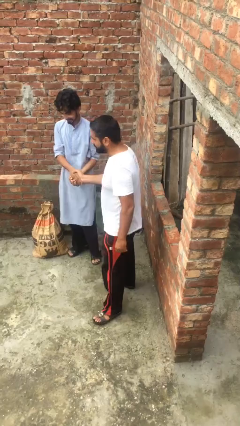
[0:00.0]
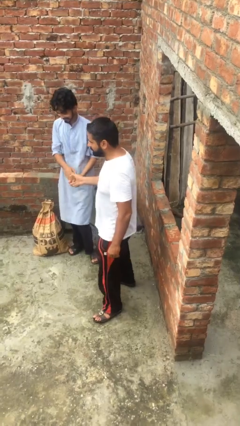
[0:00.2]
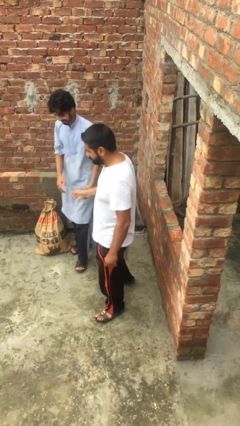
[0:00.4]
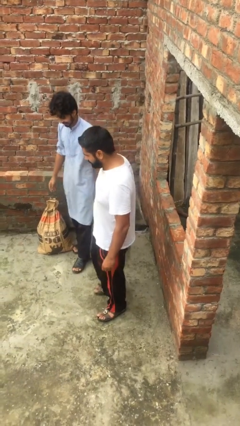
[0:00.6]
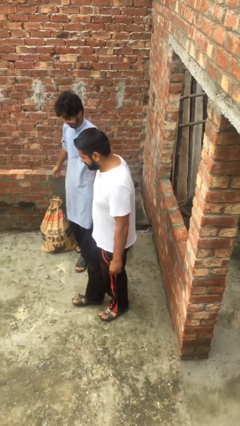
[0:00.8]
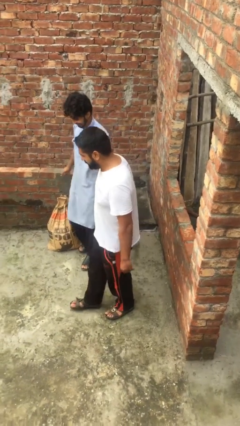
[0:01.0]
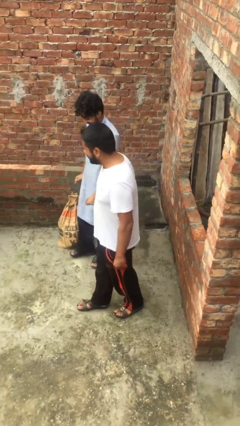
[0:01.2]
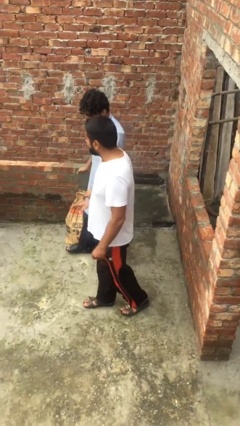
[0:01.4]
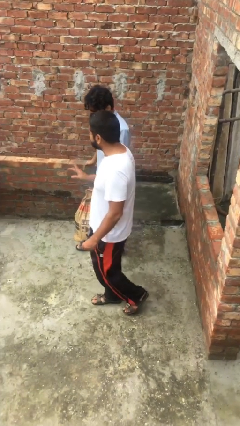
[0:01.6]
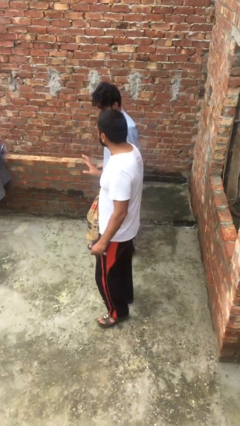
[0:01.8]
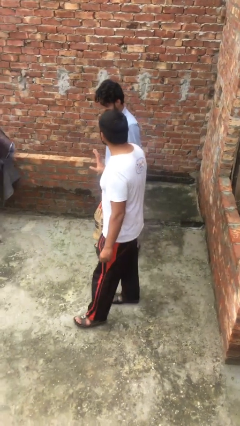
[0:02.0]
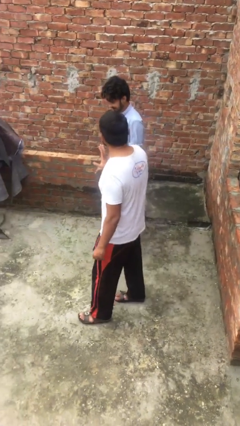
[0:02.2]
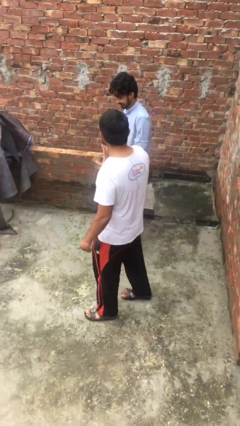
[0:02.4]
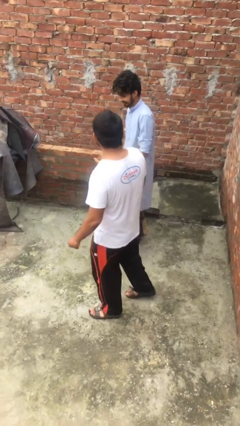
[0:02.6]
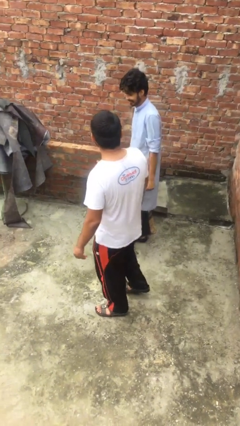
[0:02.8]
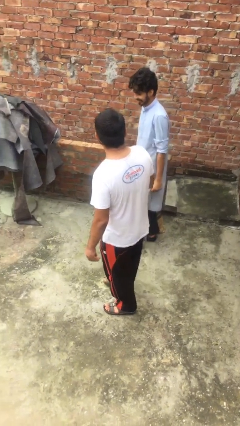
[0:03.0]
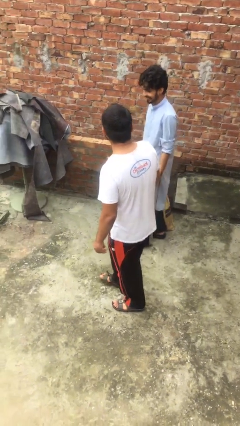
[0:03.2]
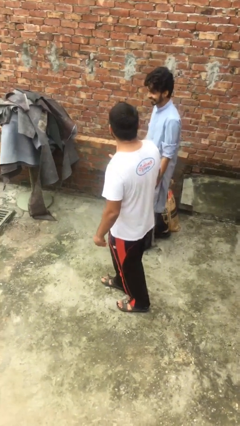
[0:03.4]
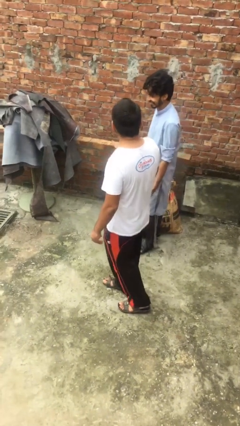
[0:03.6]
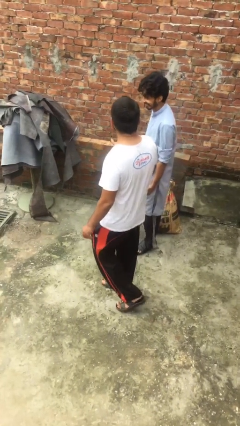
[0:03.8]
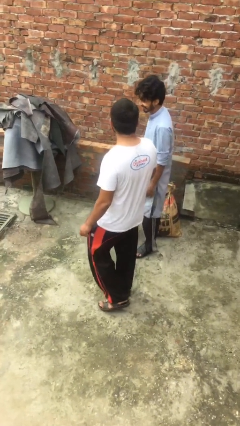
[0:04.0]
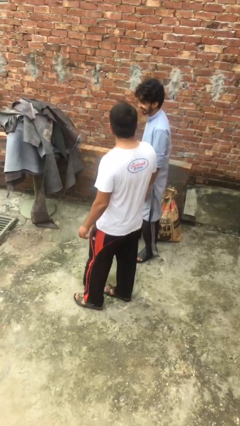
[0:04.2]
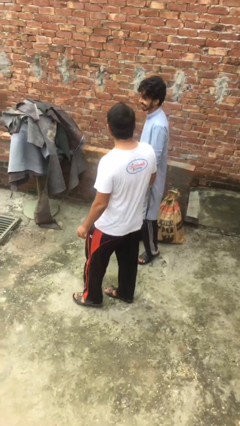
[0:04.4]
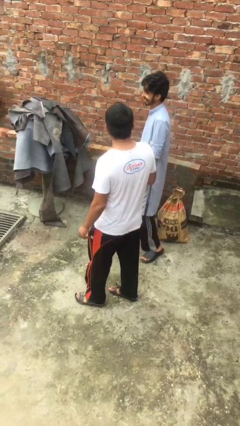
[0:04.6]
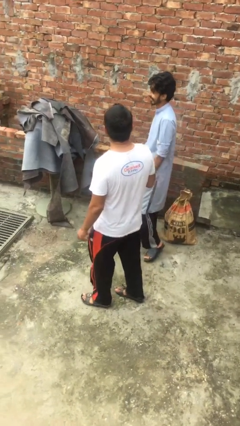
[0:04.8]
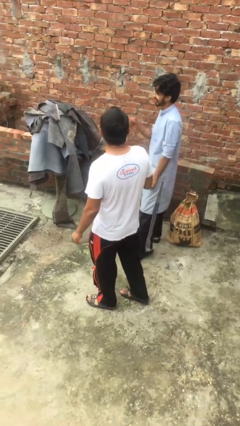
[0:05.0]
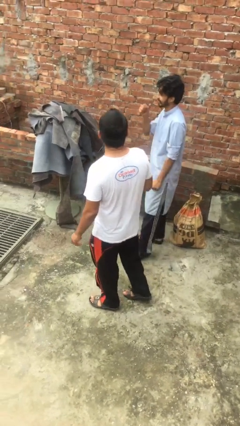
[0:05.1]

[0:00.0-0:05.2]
person talks to person

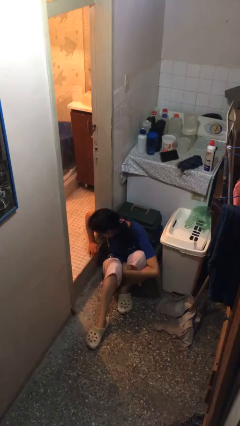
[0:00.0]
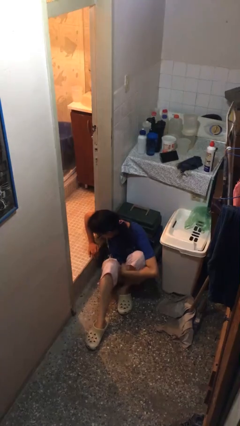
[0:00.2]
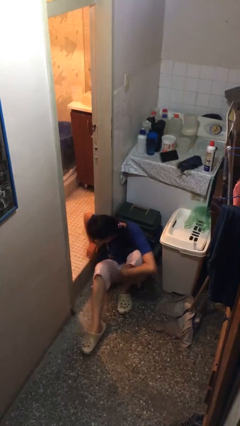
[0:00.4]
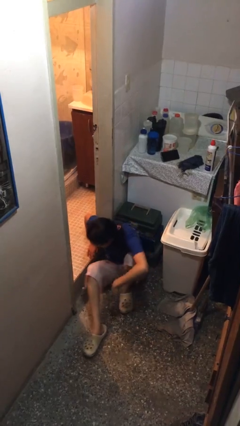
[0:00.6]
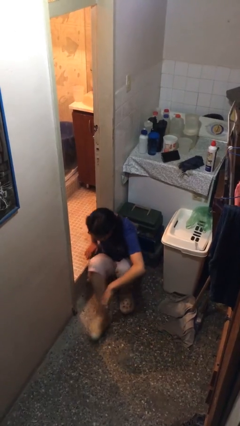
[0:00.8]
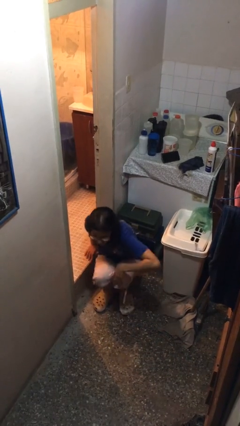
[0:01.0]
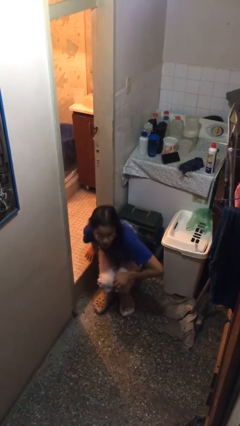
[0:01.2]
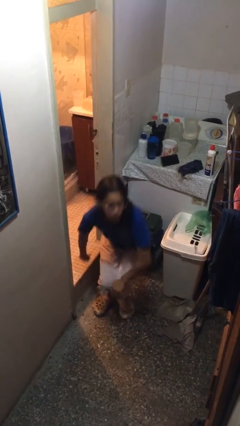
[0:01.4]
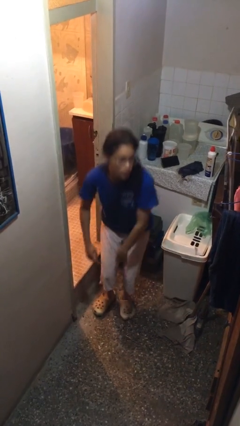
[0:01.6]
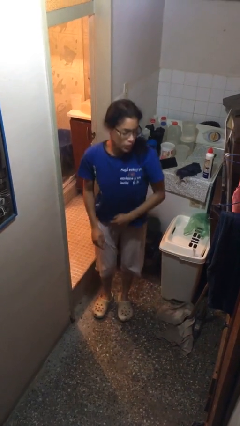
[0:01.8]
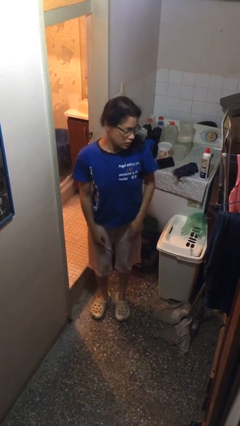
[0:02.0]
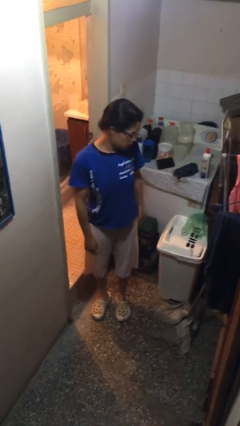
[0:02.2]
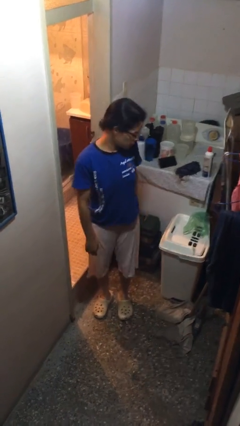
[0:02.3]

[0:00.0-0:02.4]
person stands up

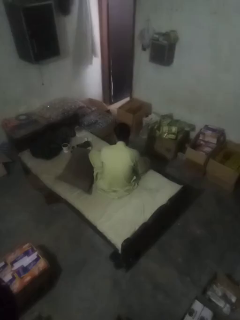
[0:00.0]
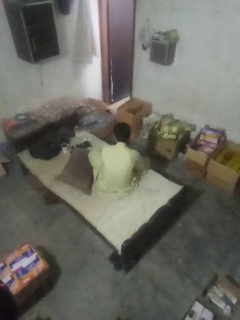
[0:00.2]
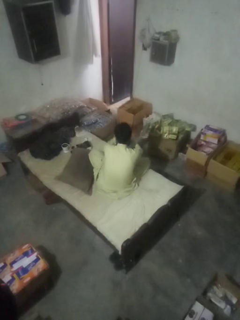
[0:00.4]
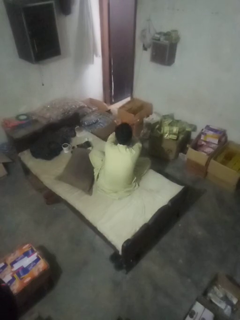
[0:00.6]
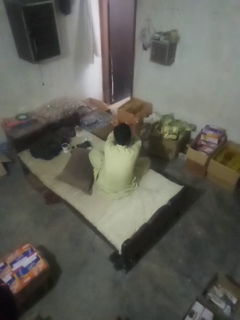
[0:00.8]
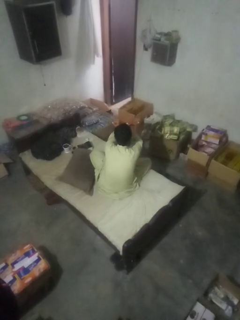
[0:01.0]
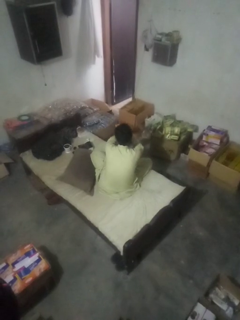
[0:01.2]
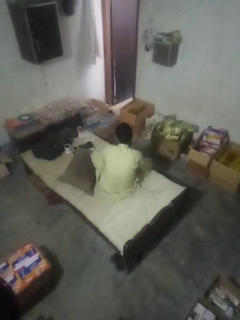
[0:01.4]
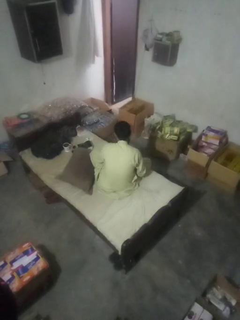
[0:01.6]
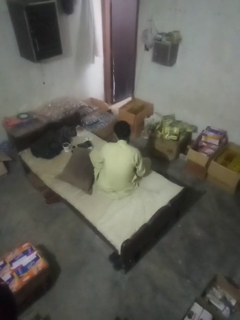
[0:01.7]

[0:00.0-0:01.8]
person gestures arms x

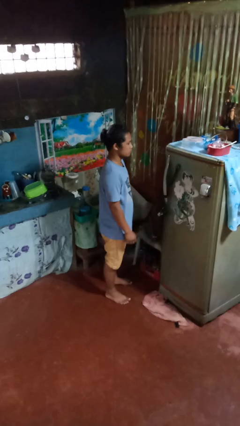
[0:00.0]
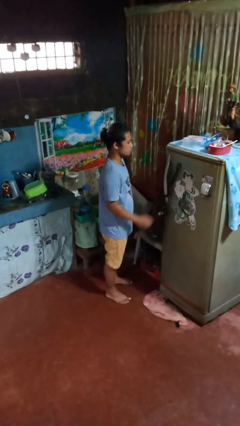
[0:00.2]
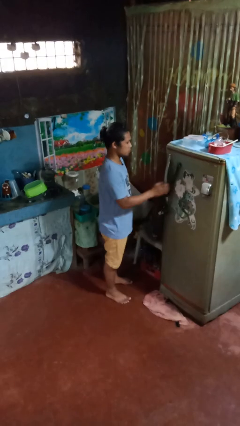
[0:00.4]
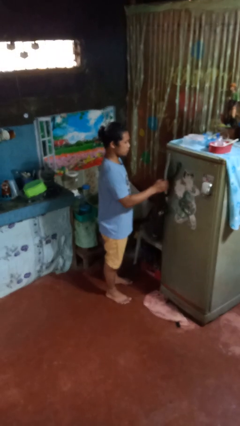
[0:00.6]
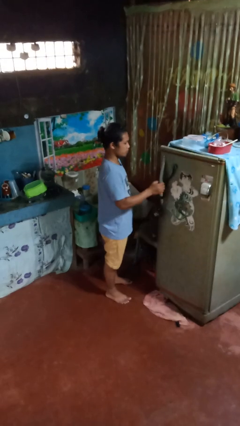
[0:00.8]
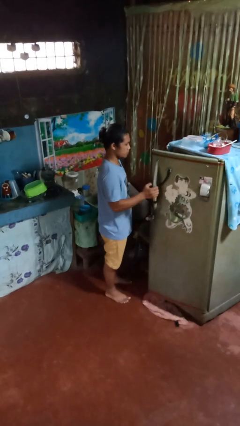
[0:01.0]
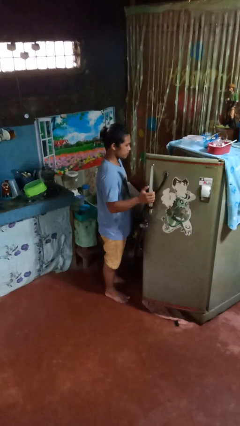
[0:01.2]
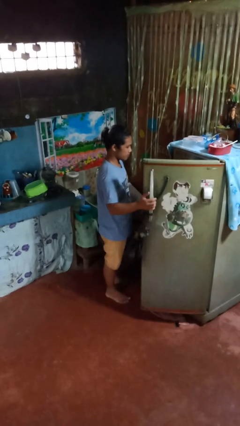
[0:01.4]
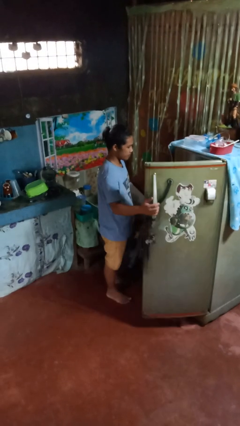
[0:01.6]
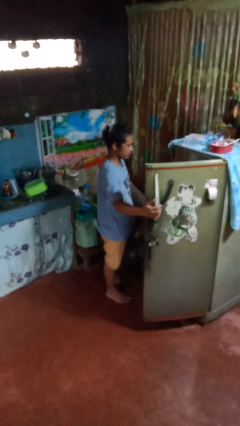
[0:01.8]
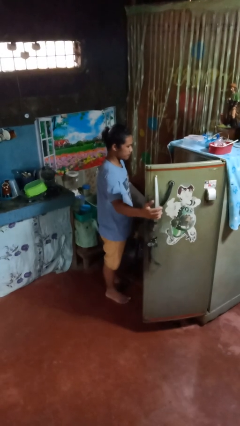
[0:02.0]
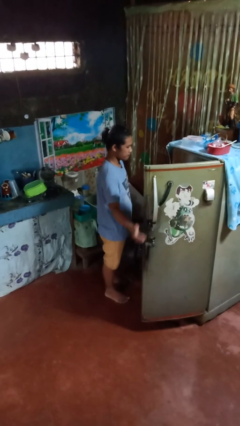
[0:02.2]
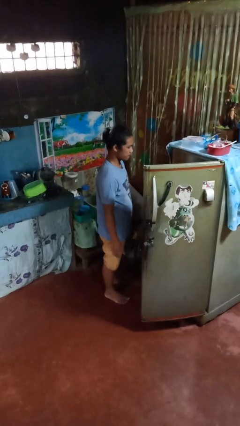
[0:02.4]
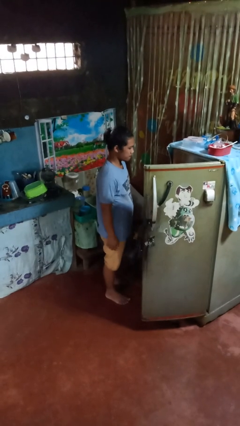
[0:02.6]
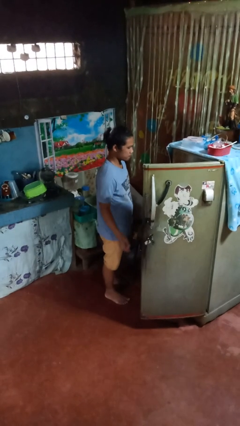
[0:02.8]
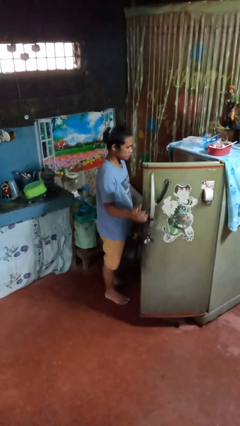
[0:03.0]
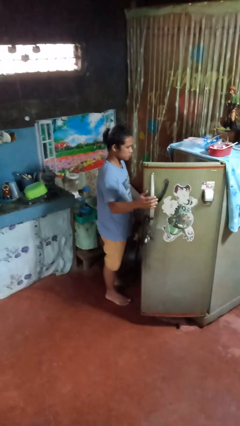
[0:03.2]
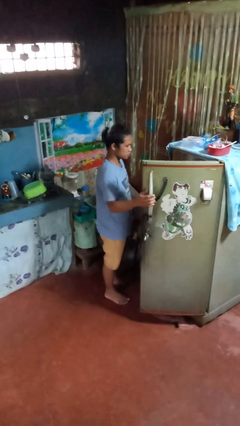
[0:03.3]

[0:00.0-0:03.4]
person opens refrigerator

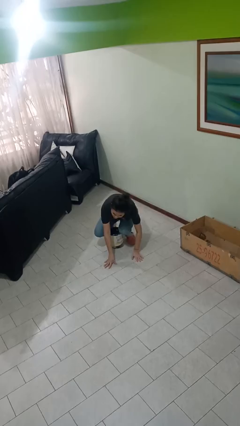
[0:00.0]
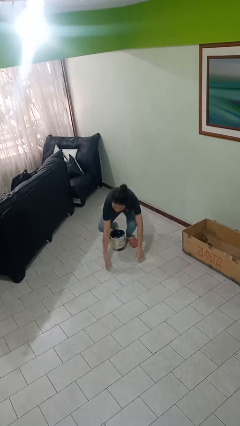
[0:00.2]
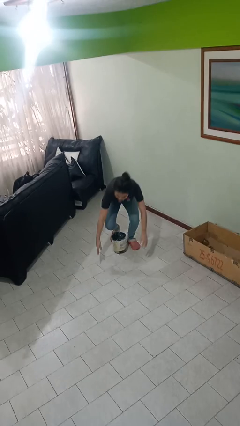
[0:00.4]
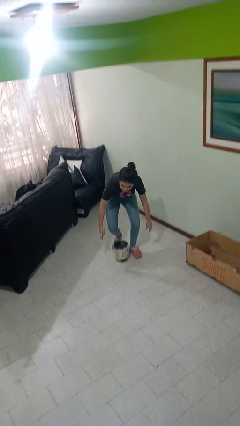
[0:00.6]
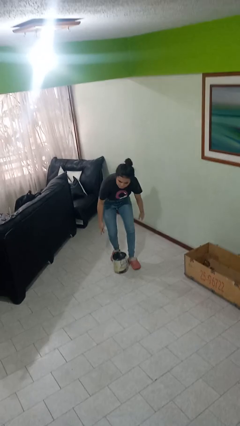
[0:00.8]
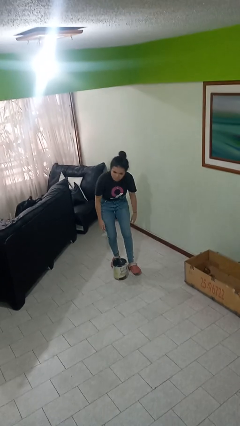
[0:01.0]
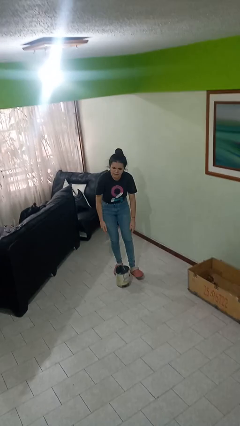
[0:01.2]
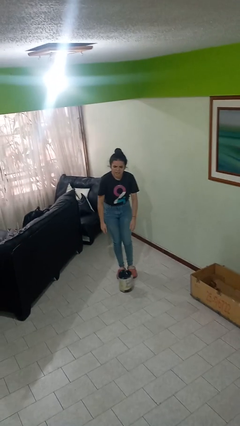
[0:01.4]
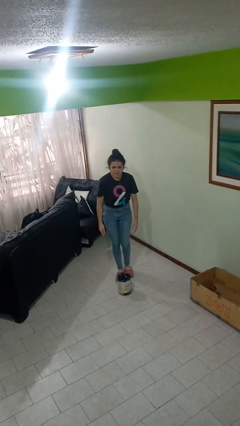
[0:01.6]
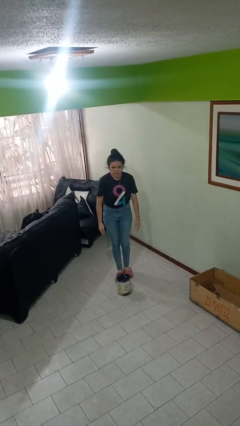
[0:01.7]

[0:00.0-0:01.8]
person stands up from floor

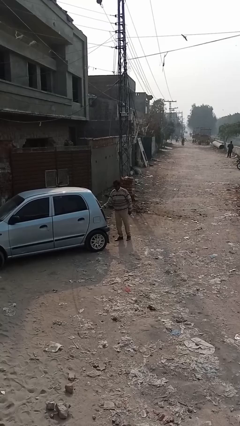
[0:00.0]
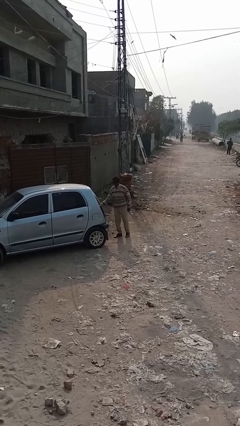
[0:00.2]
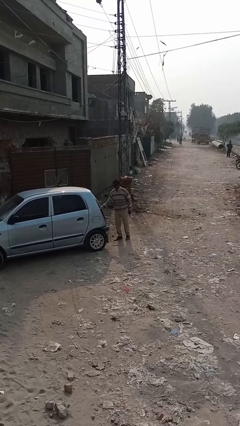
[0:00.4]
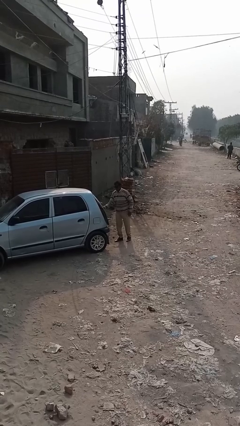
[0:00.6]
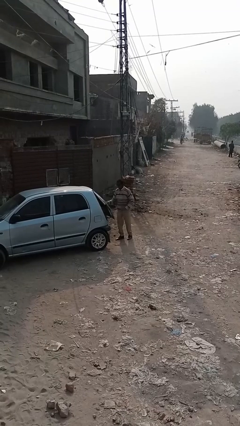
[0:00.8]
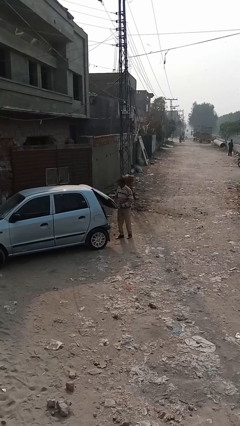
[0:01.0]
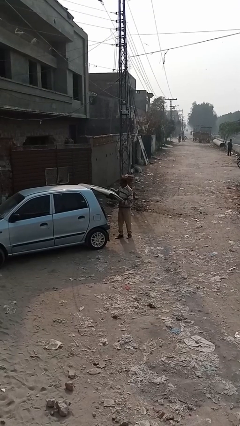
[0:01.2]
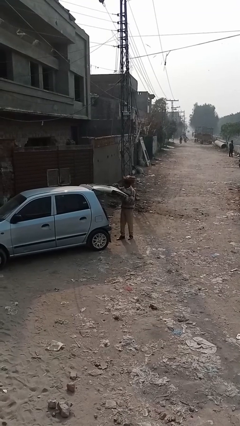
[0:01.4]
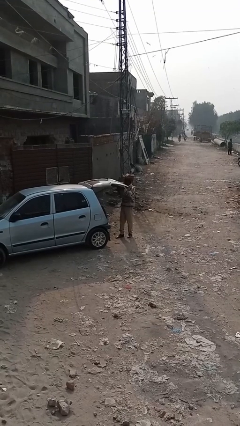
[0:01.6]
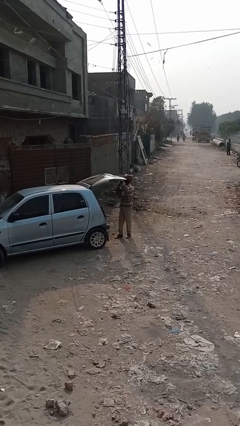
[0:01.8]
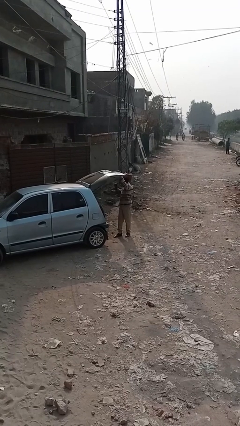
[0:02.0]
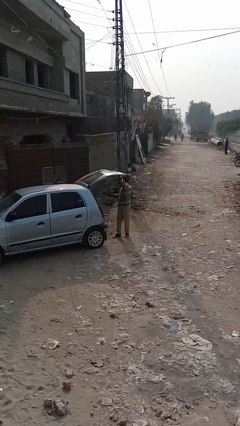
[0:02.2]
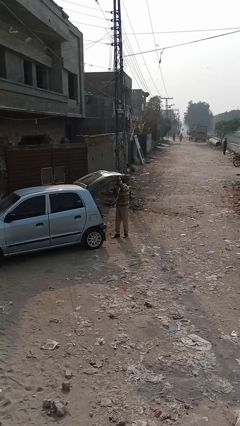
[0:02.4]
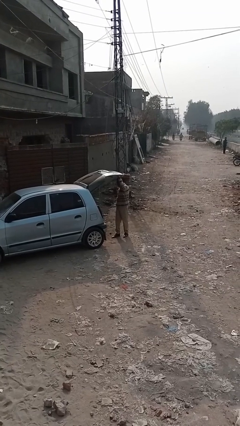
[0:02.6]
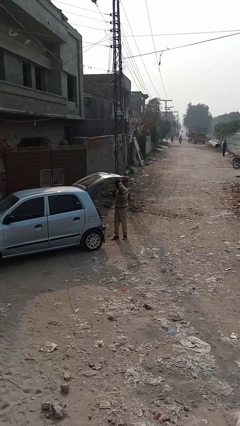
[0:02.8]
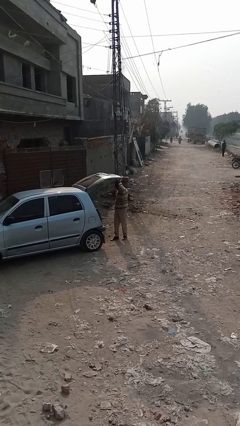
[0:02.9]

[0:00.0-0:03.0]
person opens car trunk
